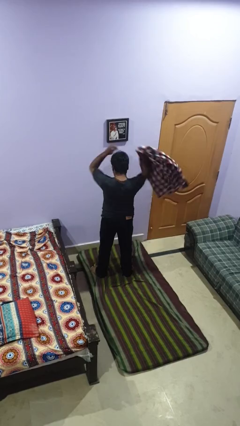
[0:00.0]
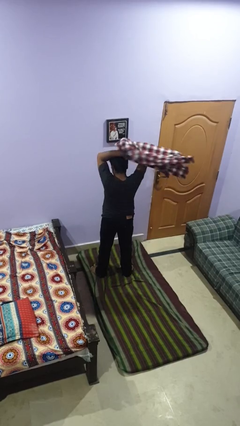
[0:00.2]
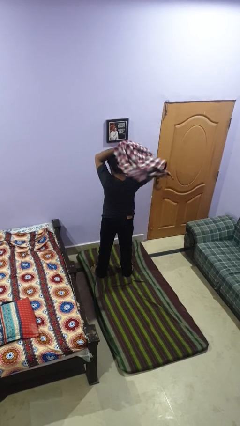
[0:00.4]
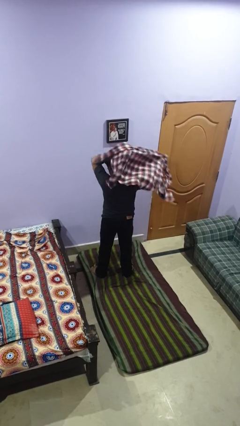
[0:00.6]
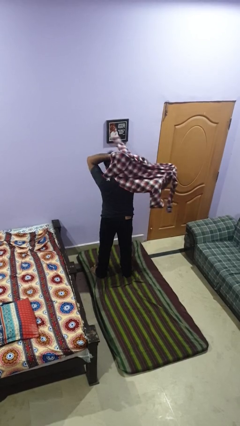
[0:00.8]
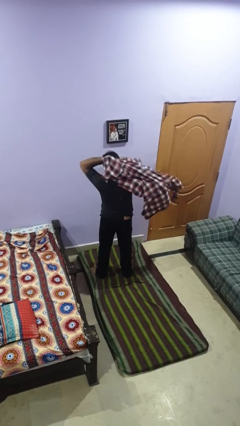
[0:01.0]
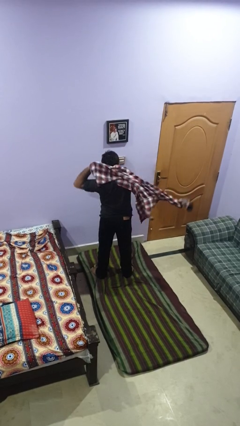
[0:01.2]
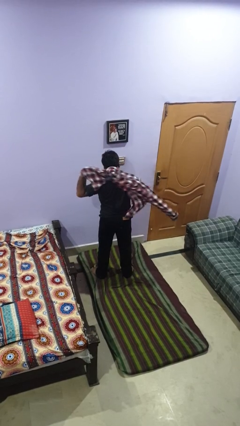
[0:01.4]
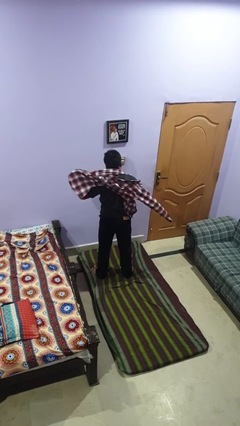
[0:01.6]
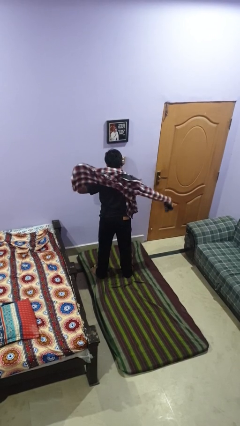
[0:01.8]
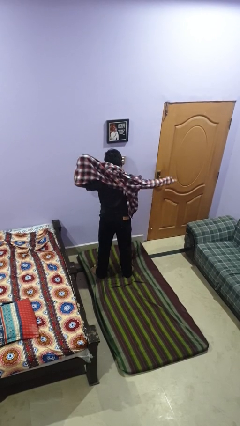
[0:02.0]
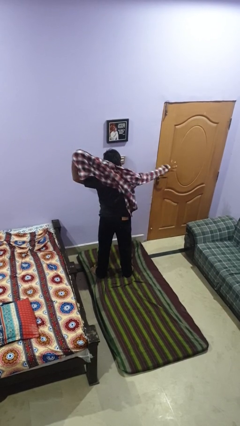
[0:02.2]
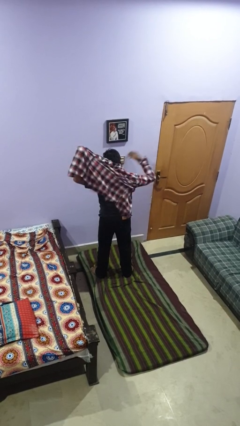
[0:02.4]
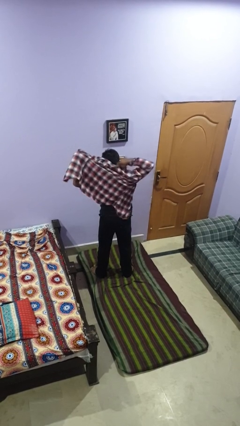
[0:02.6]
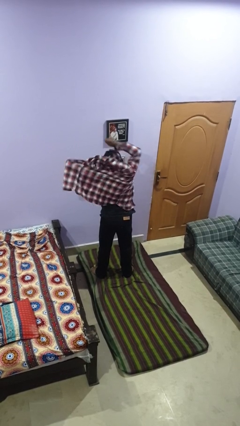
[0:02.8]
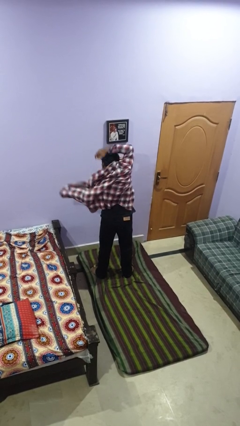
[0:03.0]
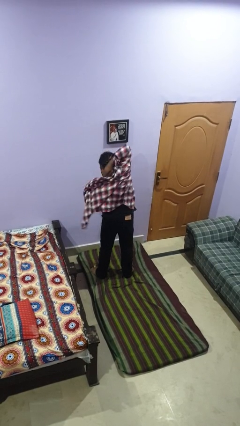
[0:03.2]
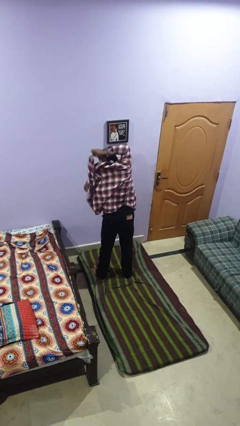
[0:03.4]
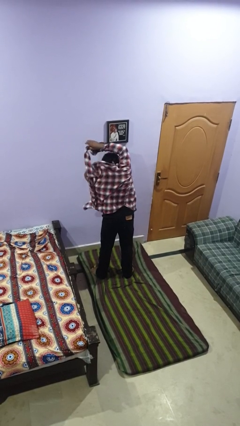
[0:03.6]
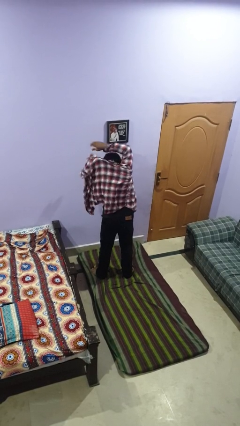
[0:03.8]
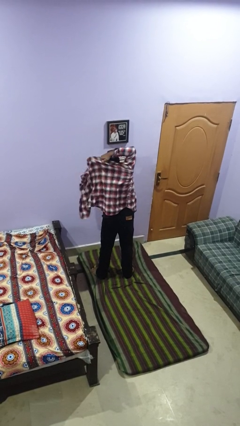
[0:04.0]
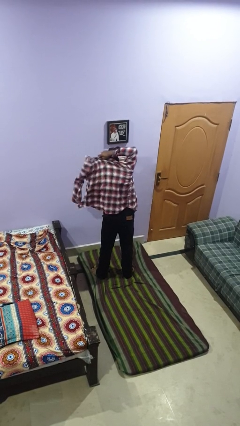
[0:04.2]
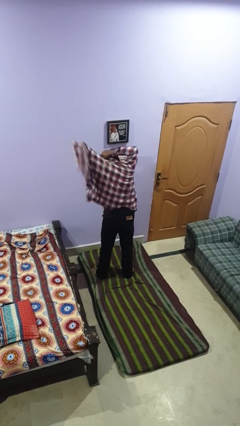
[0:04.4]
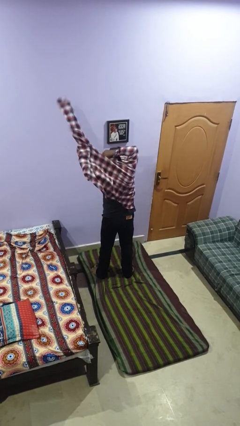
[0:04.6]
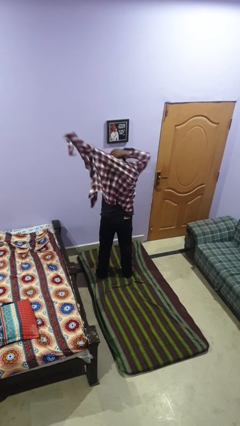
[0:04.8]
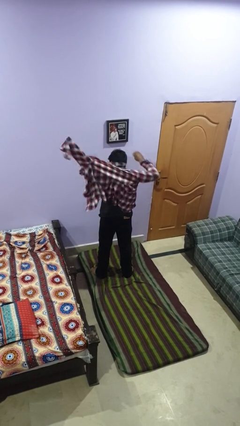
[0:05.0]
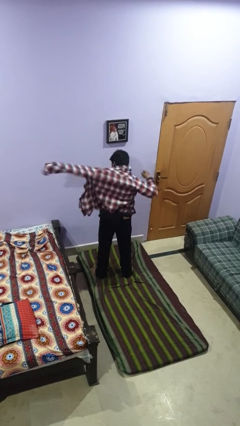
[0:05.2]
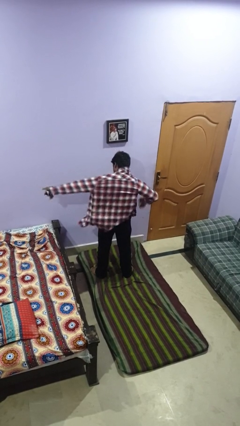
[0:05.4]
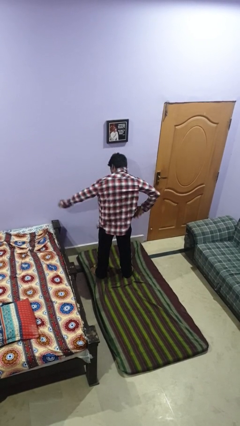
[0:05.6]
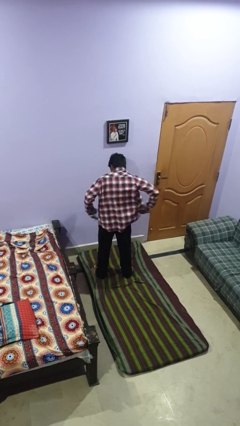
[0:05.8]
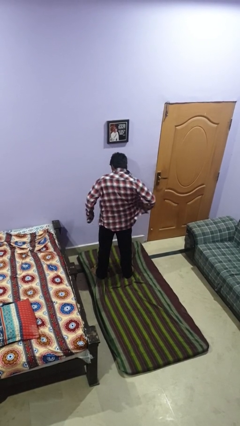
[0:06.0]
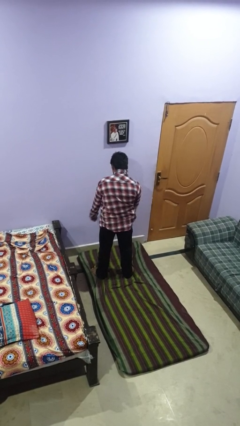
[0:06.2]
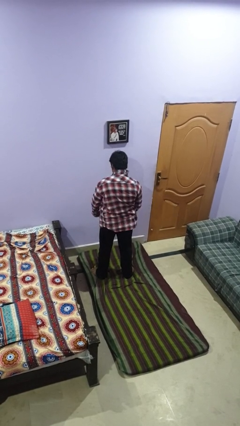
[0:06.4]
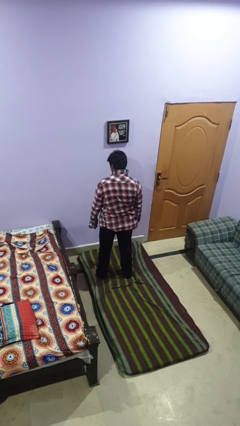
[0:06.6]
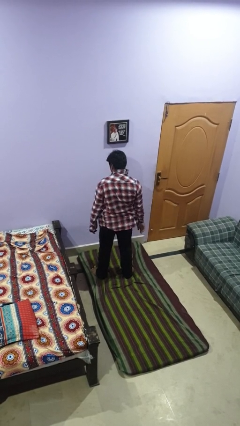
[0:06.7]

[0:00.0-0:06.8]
person puts on shirt

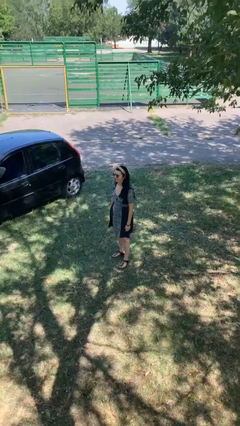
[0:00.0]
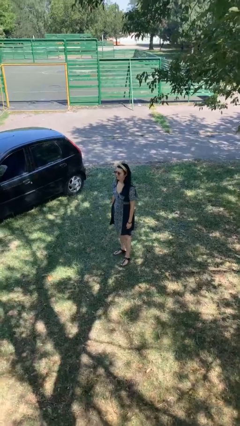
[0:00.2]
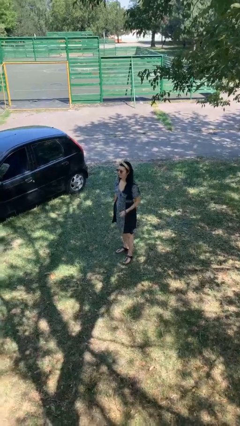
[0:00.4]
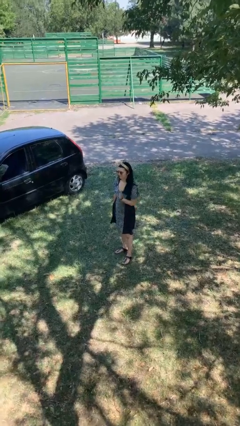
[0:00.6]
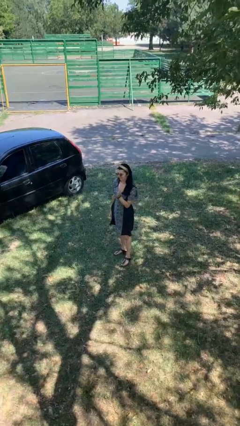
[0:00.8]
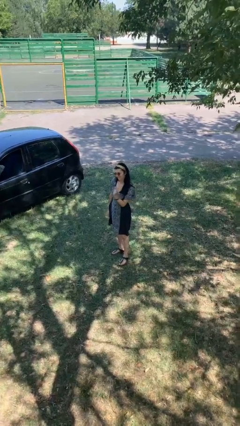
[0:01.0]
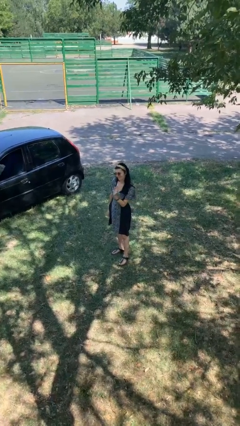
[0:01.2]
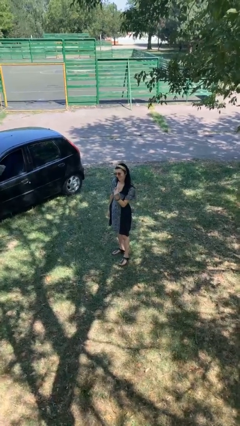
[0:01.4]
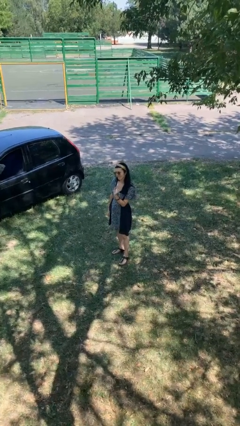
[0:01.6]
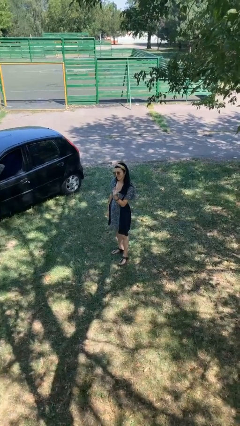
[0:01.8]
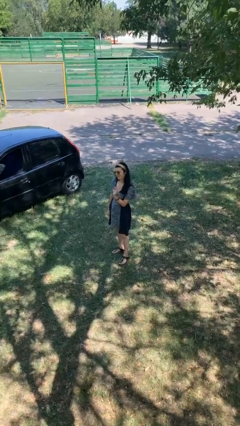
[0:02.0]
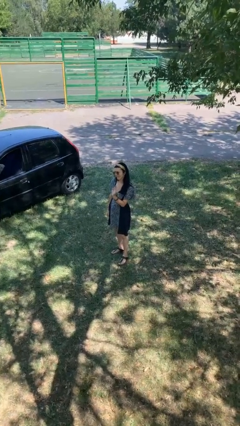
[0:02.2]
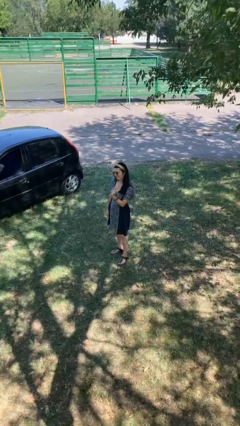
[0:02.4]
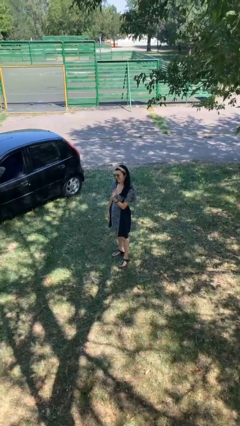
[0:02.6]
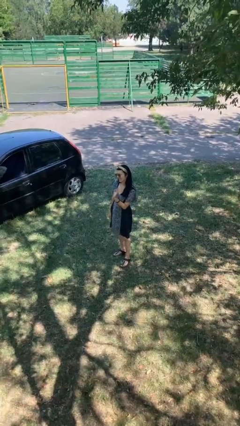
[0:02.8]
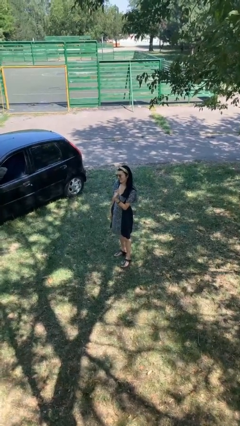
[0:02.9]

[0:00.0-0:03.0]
person waves at person

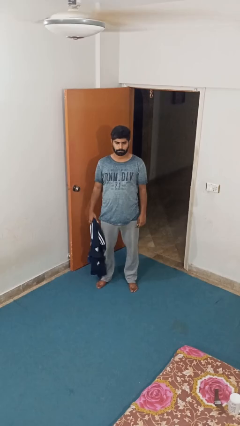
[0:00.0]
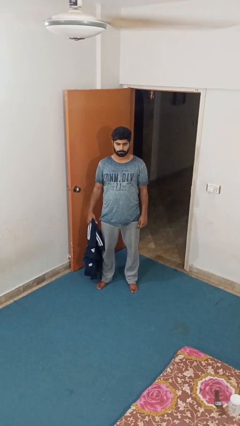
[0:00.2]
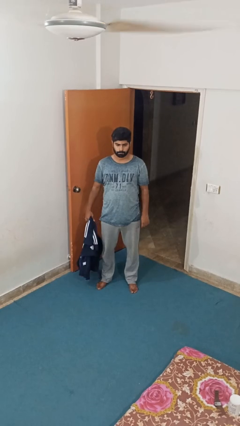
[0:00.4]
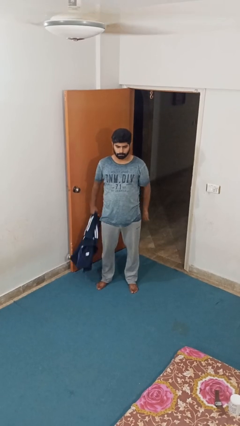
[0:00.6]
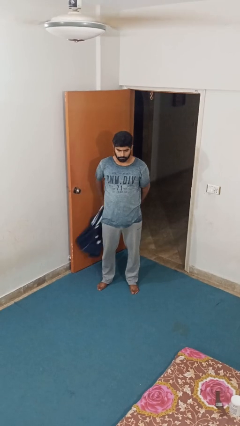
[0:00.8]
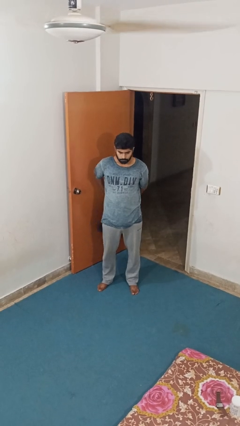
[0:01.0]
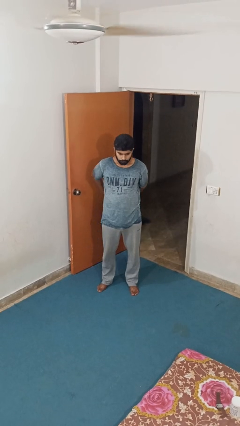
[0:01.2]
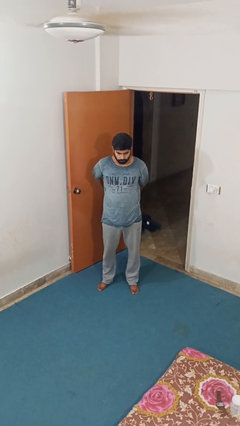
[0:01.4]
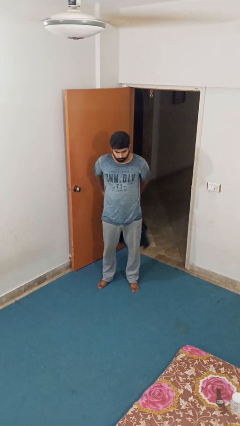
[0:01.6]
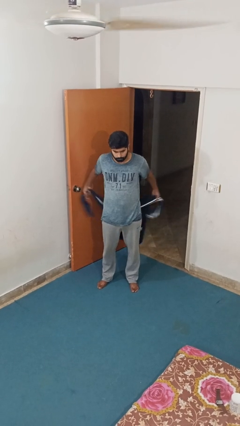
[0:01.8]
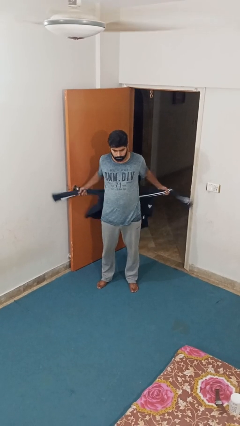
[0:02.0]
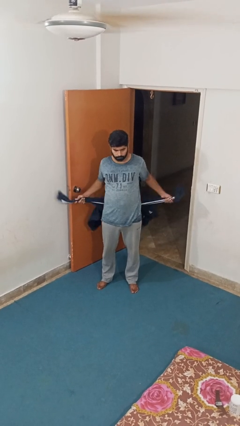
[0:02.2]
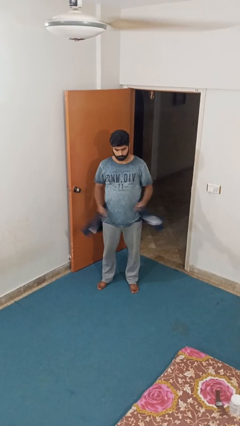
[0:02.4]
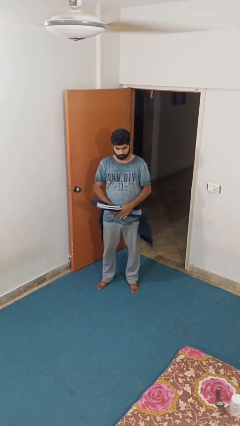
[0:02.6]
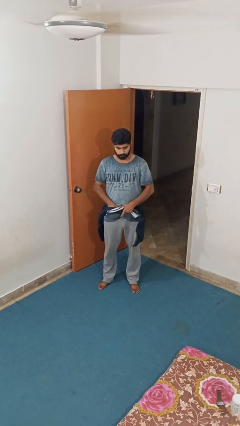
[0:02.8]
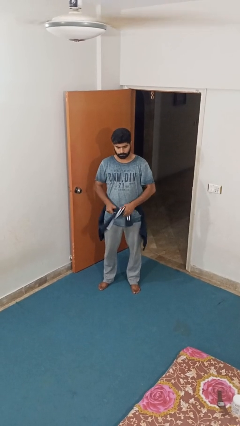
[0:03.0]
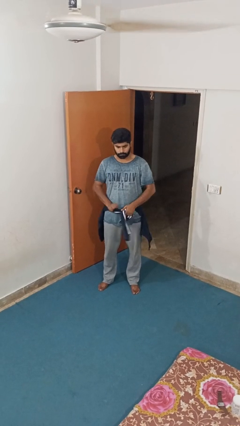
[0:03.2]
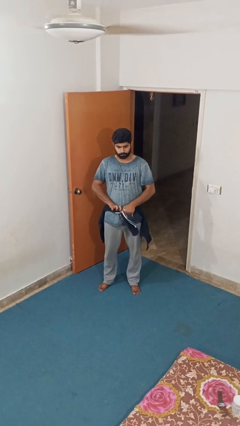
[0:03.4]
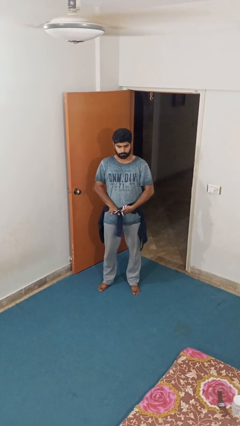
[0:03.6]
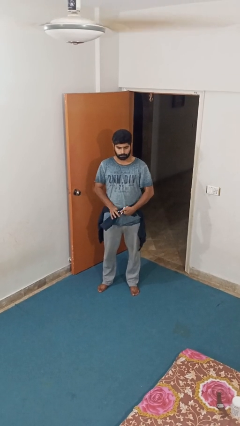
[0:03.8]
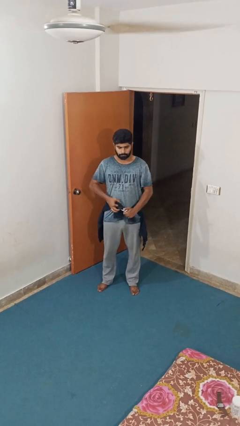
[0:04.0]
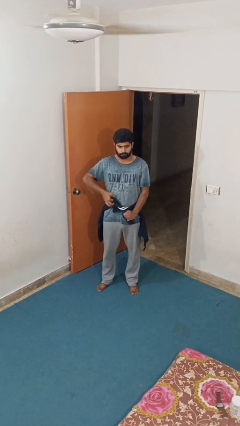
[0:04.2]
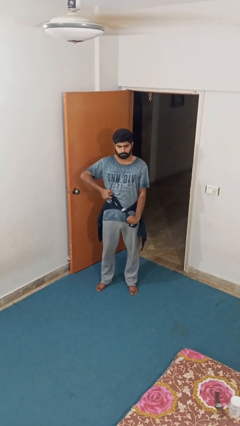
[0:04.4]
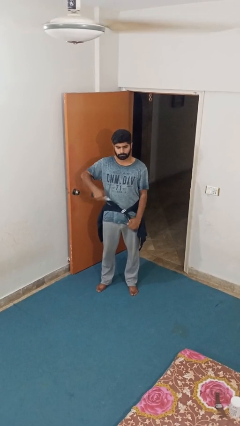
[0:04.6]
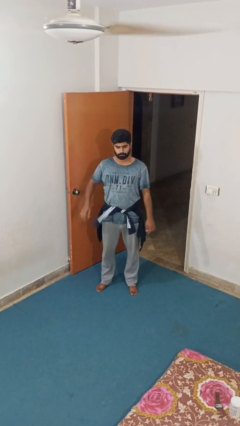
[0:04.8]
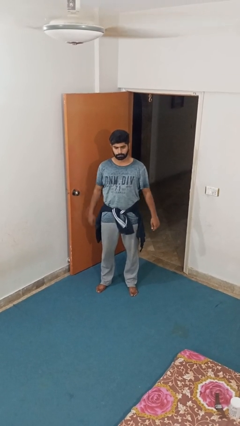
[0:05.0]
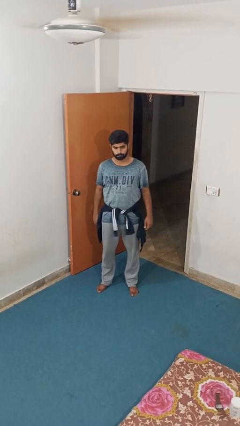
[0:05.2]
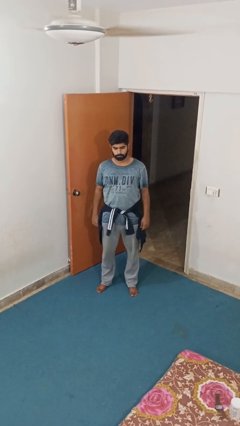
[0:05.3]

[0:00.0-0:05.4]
person ties jacket around waist

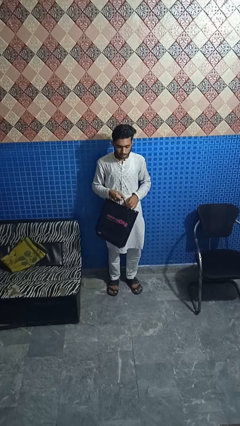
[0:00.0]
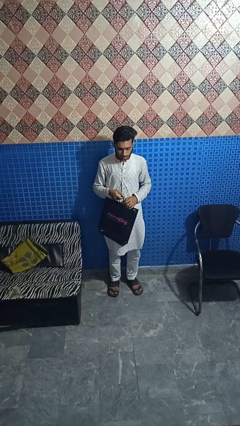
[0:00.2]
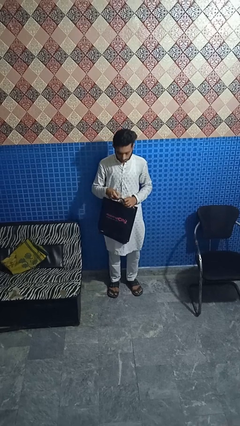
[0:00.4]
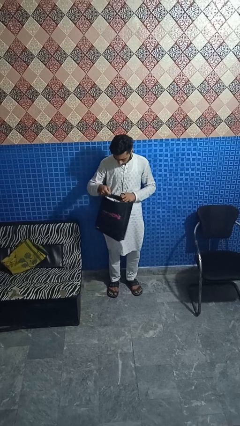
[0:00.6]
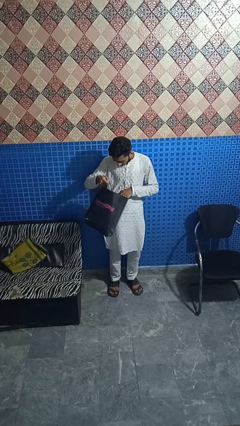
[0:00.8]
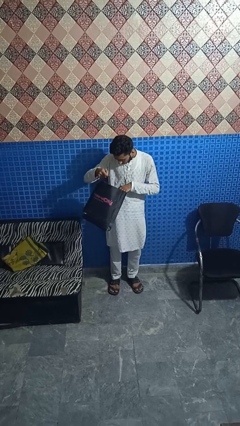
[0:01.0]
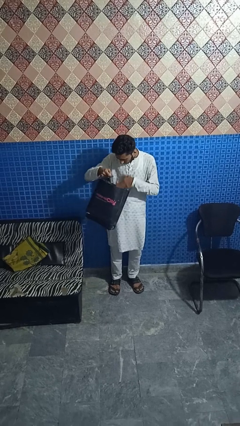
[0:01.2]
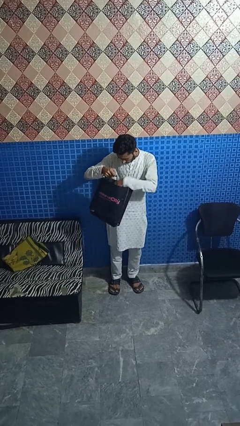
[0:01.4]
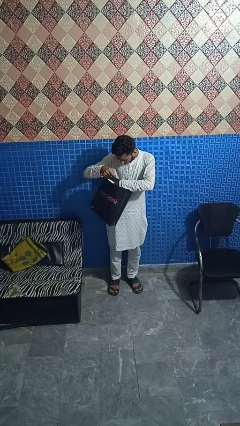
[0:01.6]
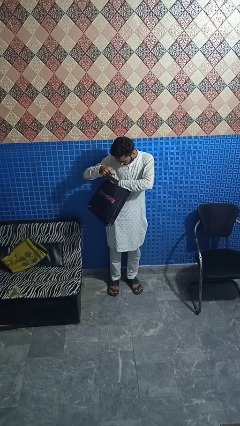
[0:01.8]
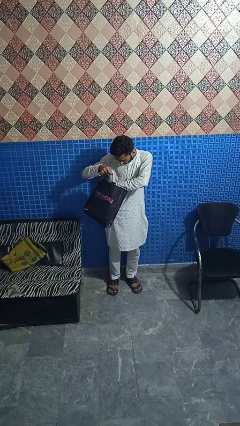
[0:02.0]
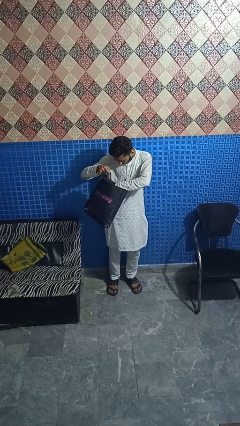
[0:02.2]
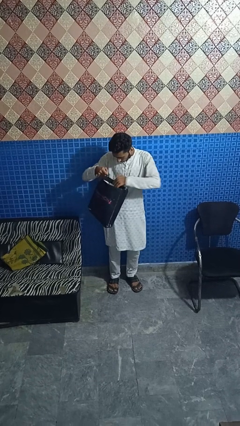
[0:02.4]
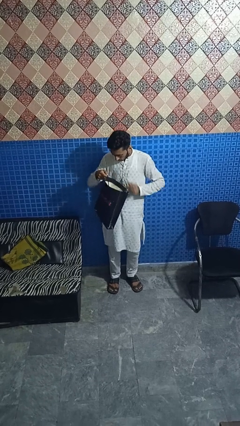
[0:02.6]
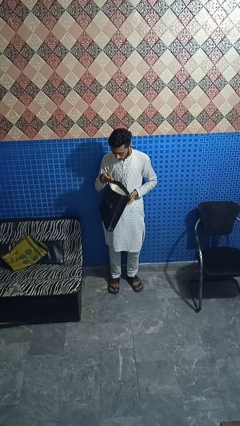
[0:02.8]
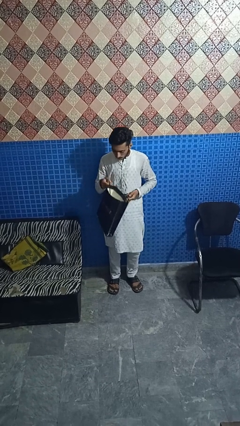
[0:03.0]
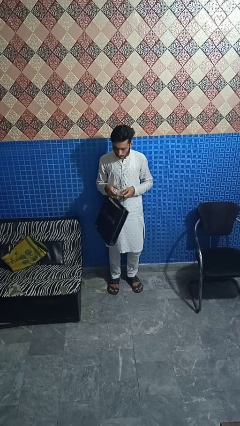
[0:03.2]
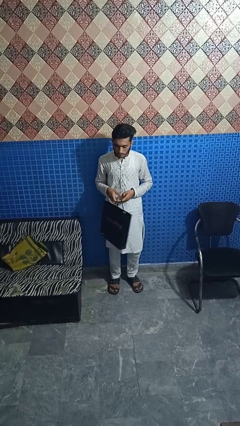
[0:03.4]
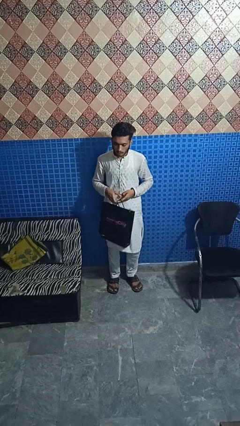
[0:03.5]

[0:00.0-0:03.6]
person searches in bag
